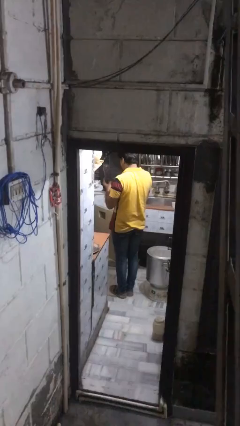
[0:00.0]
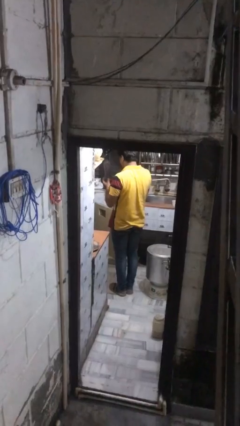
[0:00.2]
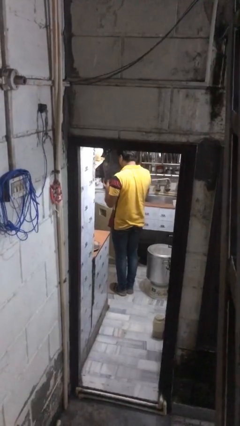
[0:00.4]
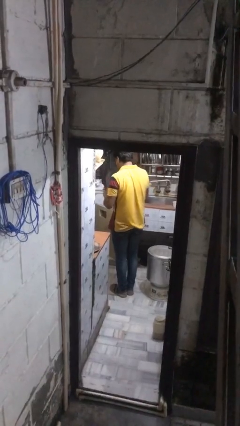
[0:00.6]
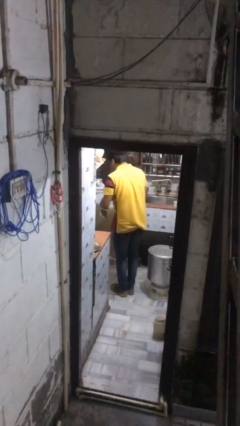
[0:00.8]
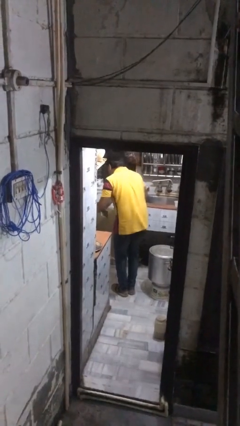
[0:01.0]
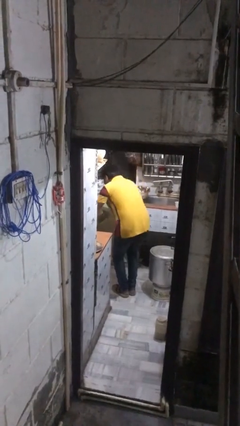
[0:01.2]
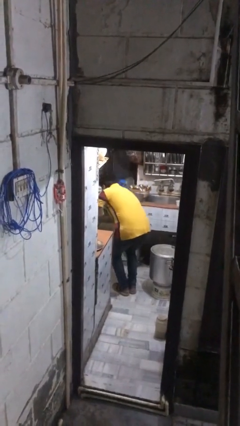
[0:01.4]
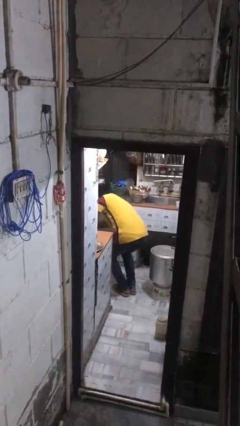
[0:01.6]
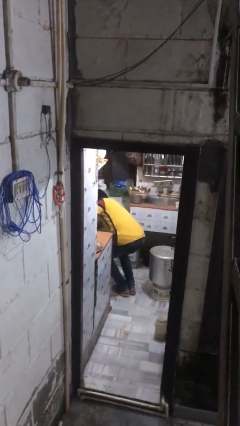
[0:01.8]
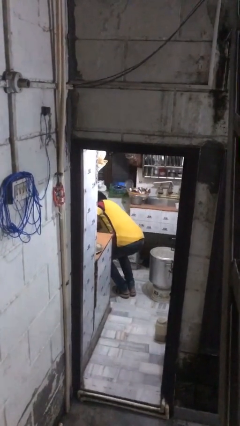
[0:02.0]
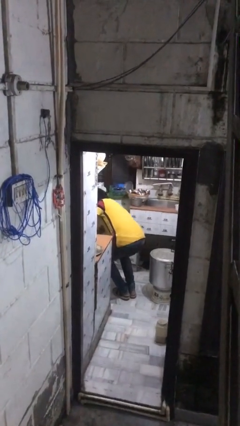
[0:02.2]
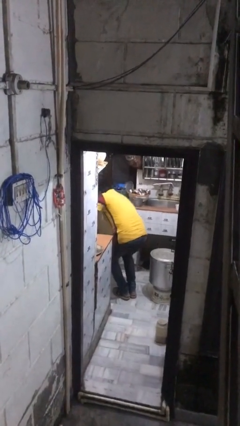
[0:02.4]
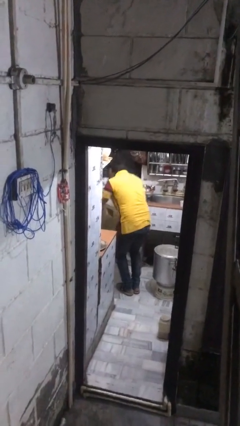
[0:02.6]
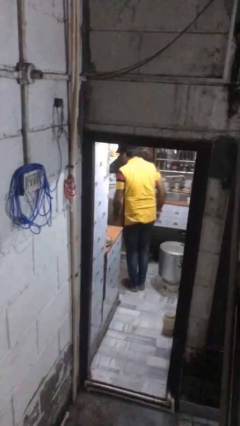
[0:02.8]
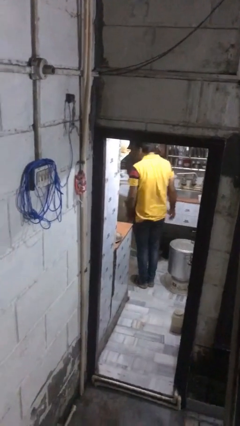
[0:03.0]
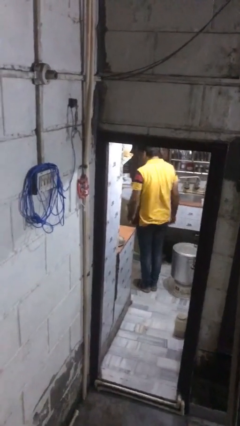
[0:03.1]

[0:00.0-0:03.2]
person puts object into kitchen drawer

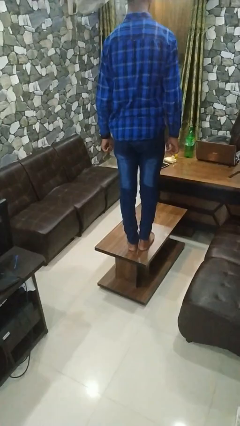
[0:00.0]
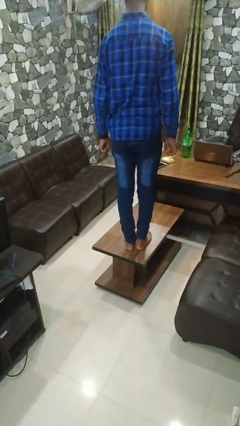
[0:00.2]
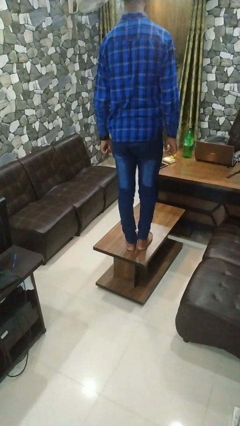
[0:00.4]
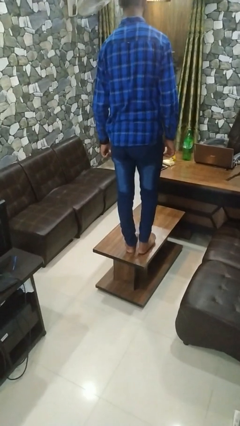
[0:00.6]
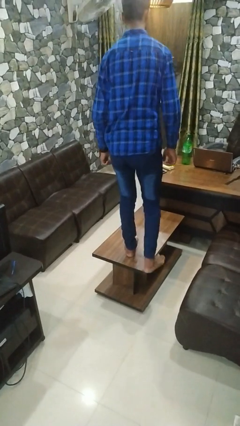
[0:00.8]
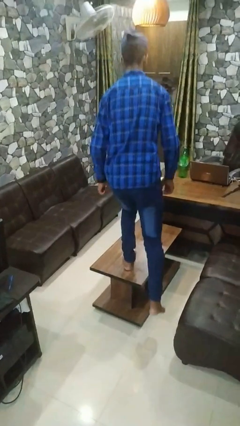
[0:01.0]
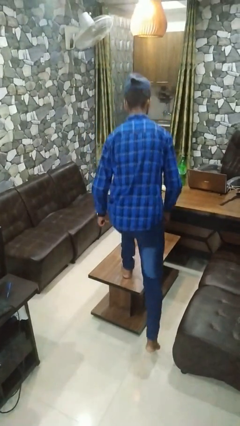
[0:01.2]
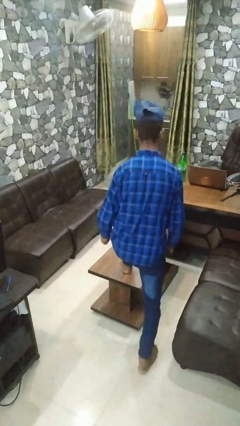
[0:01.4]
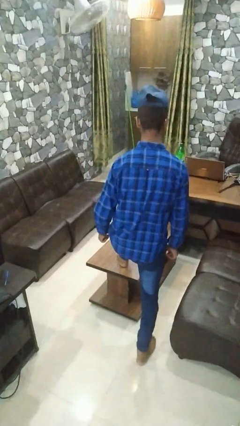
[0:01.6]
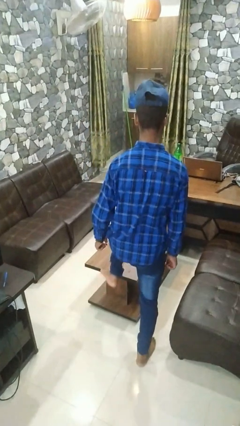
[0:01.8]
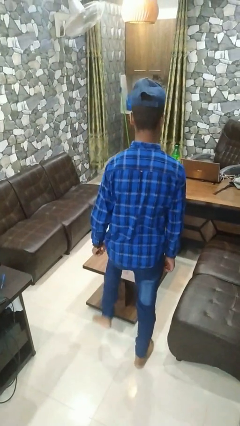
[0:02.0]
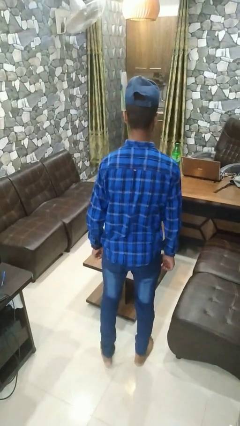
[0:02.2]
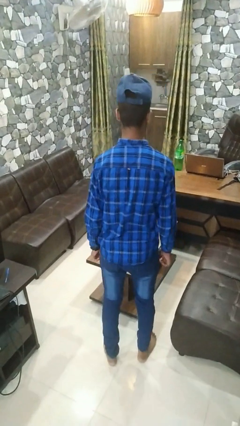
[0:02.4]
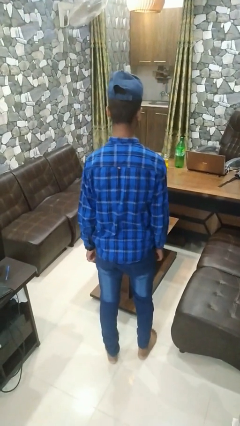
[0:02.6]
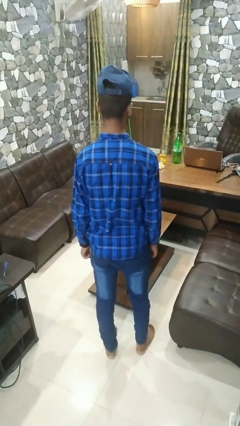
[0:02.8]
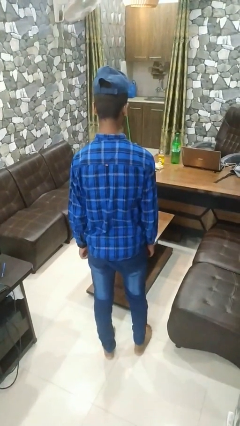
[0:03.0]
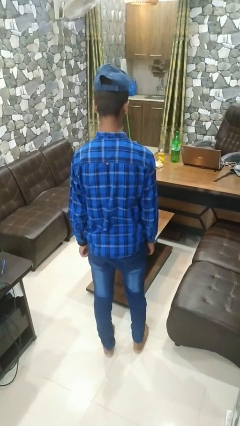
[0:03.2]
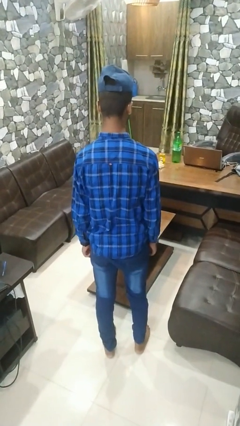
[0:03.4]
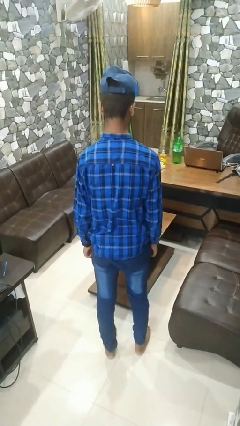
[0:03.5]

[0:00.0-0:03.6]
person climbs off table

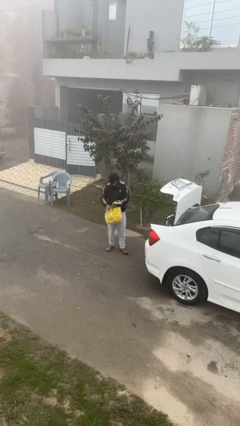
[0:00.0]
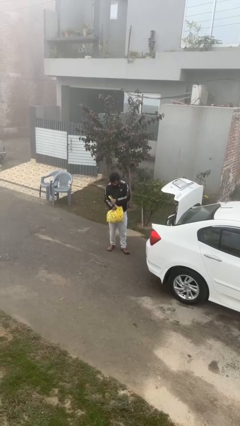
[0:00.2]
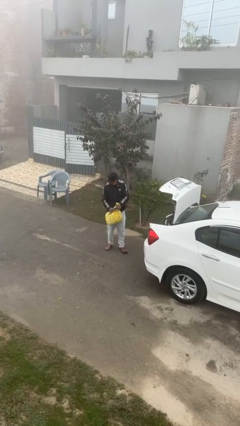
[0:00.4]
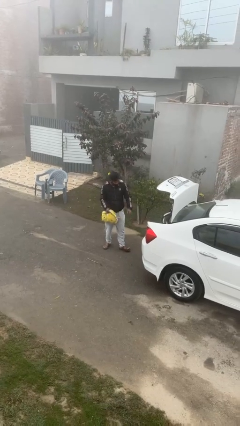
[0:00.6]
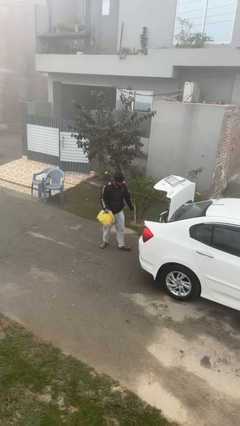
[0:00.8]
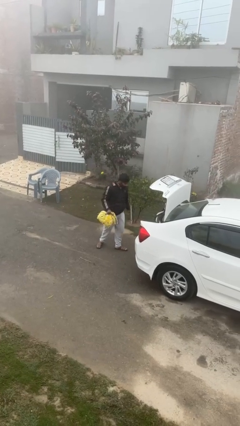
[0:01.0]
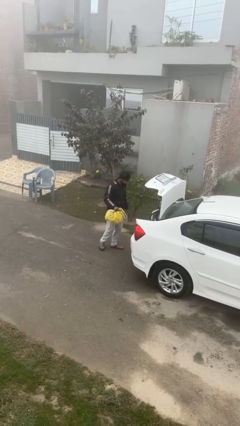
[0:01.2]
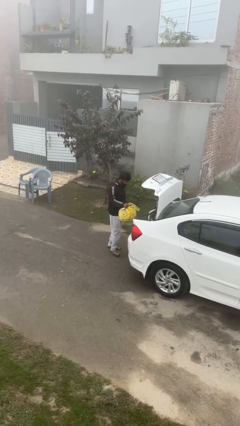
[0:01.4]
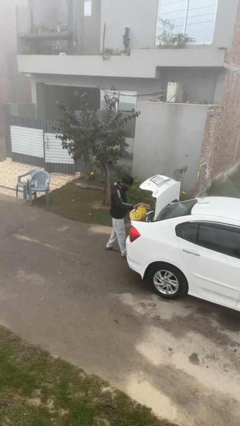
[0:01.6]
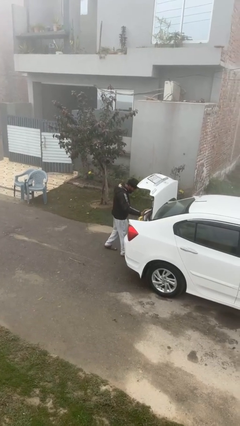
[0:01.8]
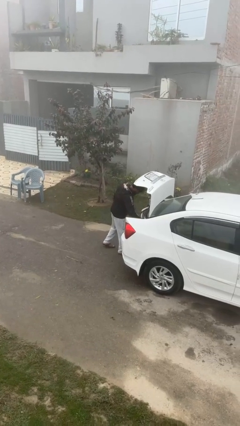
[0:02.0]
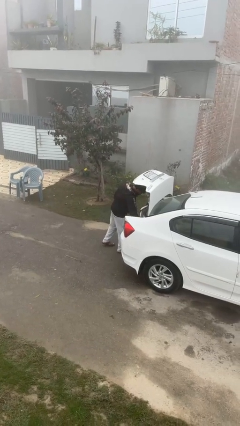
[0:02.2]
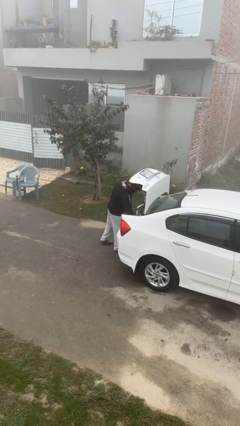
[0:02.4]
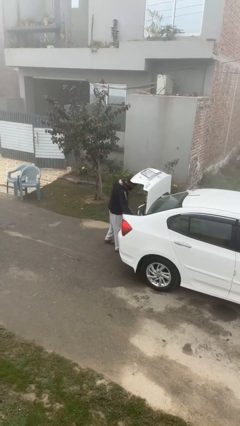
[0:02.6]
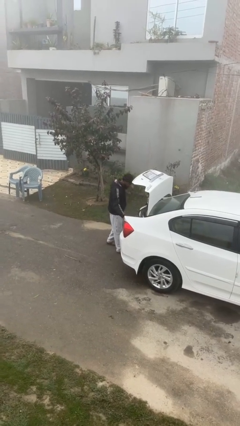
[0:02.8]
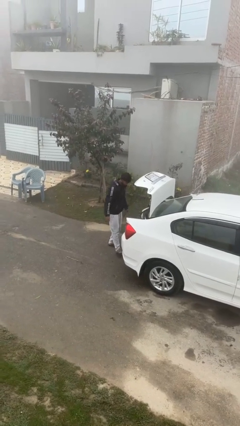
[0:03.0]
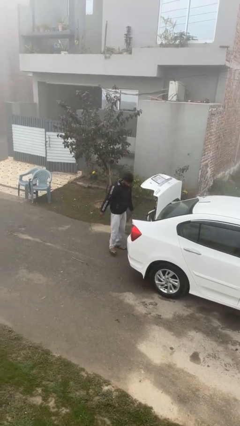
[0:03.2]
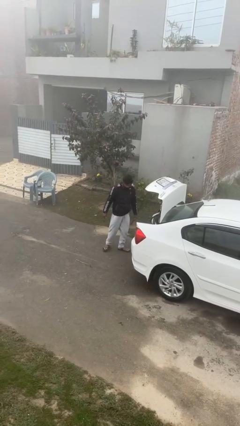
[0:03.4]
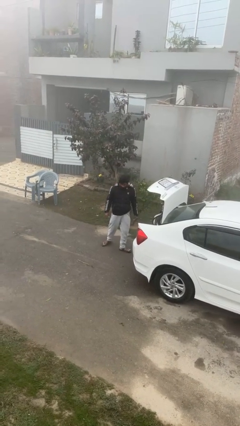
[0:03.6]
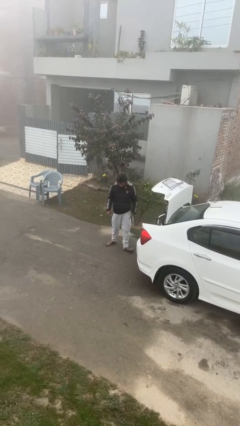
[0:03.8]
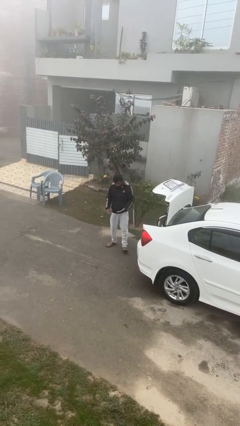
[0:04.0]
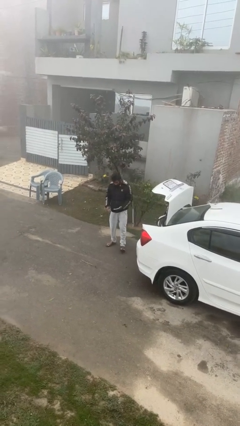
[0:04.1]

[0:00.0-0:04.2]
person loads car

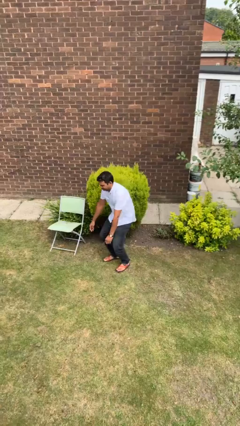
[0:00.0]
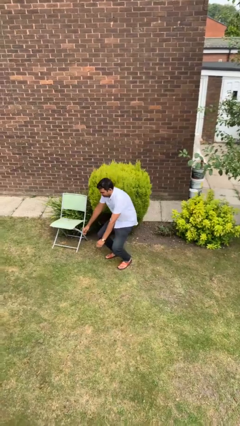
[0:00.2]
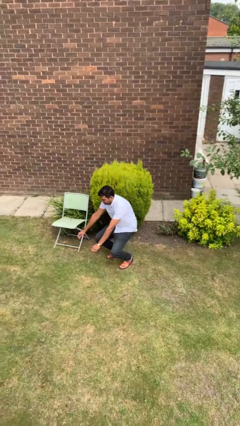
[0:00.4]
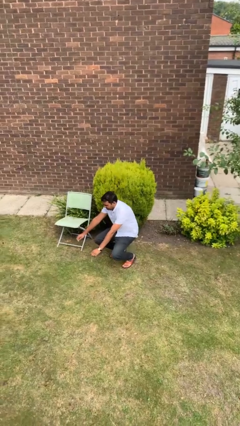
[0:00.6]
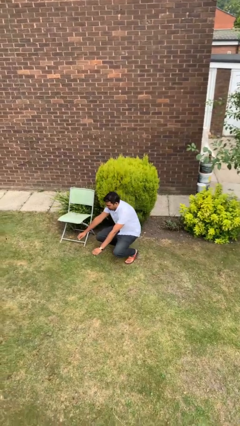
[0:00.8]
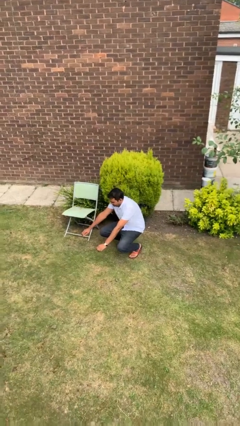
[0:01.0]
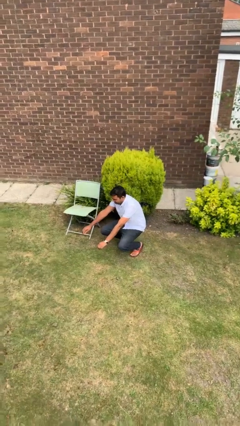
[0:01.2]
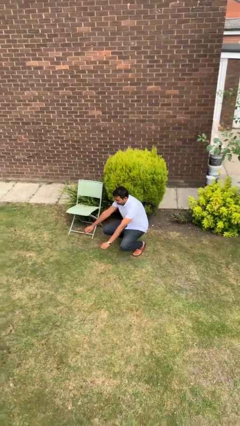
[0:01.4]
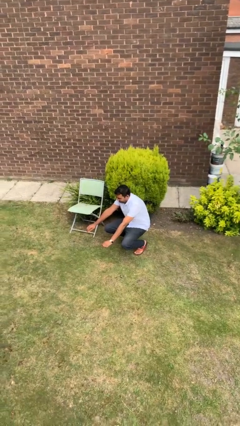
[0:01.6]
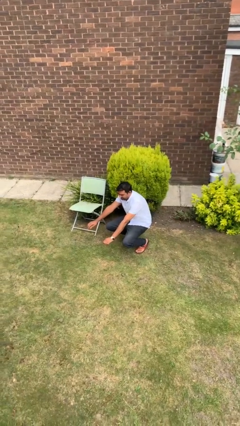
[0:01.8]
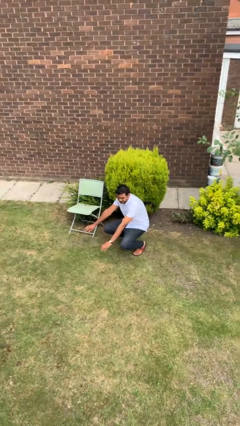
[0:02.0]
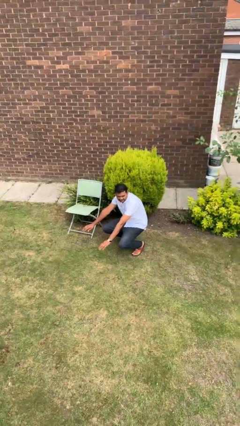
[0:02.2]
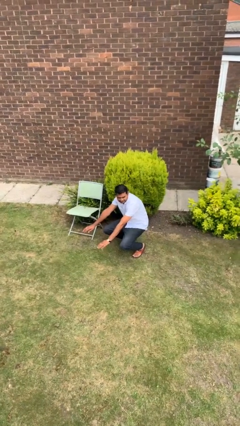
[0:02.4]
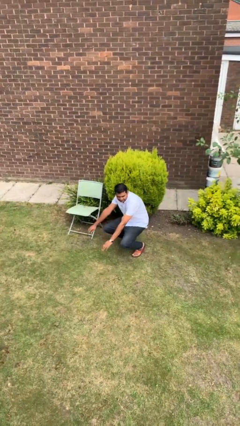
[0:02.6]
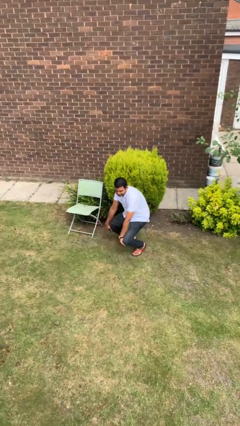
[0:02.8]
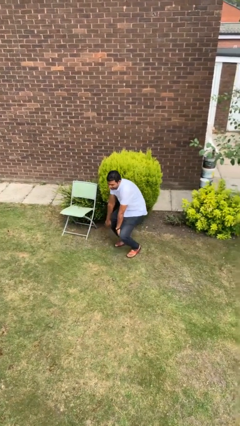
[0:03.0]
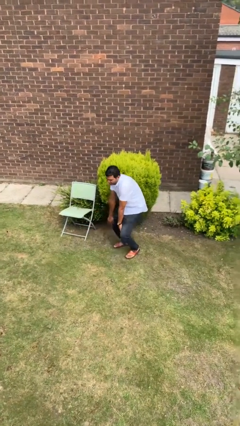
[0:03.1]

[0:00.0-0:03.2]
person squats

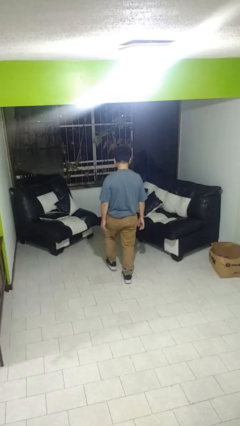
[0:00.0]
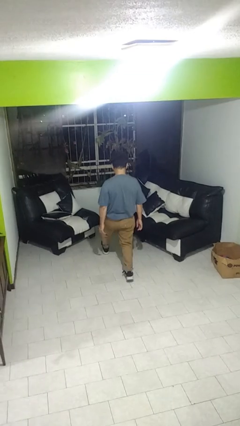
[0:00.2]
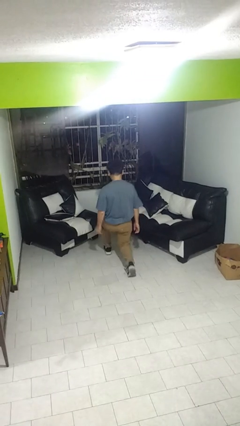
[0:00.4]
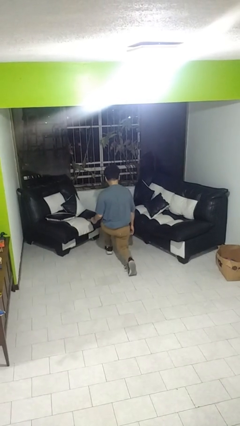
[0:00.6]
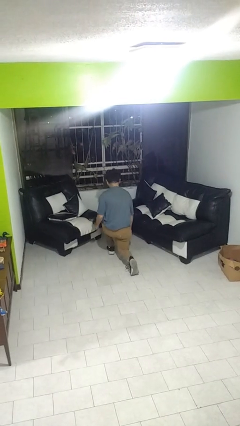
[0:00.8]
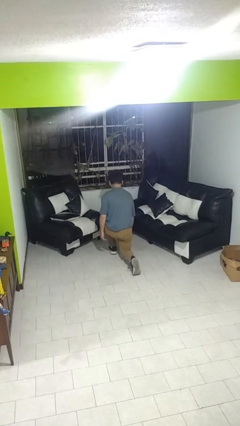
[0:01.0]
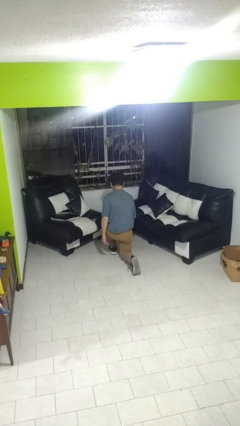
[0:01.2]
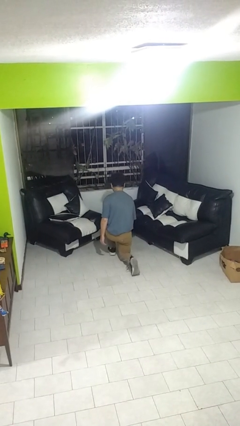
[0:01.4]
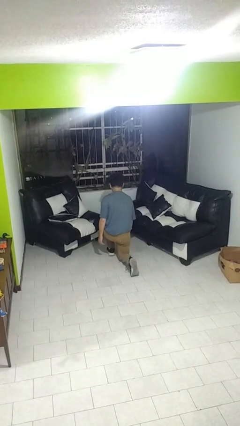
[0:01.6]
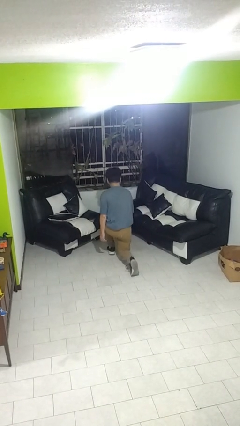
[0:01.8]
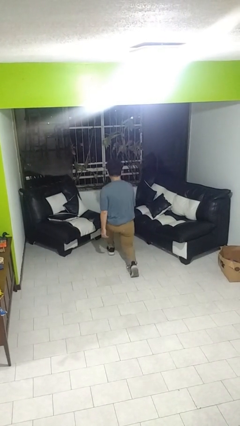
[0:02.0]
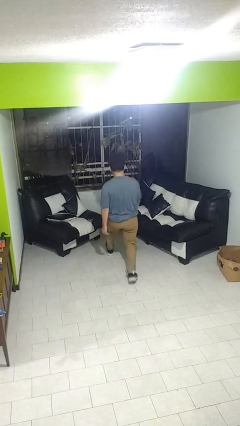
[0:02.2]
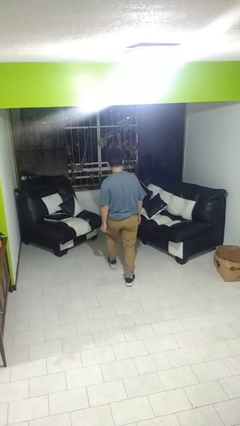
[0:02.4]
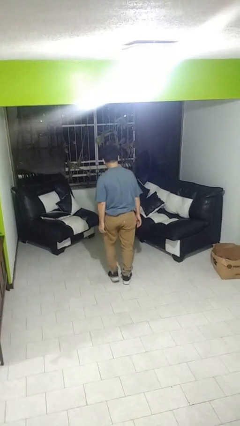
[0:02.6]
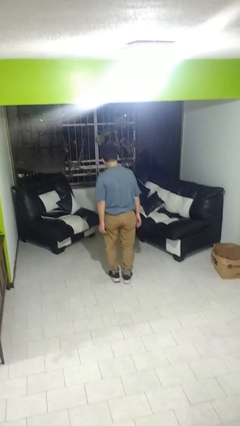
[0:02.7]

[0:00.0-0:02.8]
person exercises with lunges

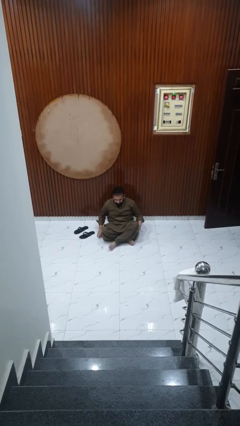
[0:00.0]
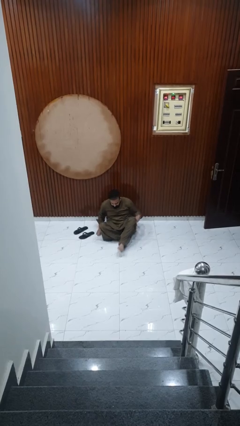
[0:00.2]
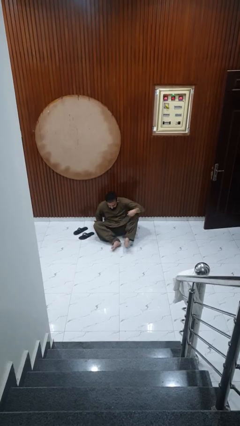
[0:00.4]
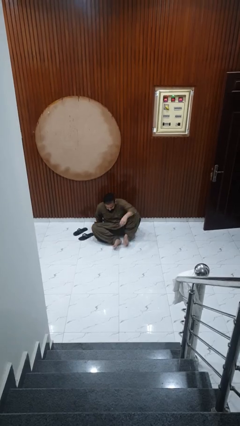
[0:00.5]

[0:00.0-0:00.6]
person stands up from floor
